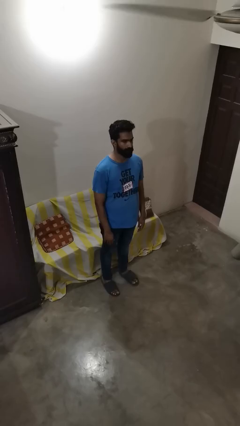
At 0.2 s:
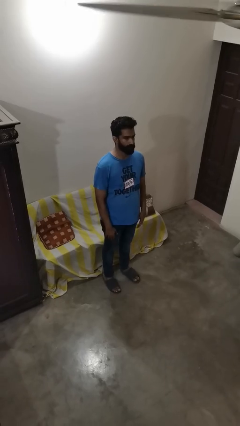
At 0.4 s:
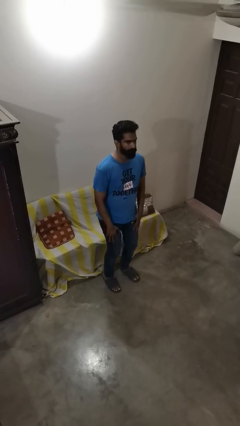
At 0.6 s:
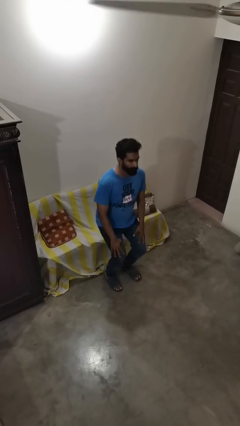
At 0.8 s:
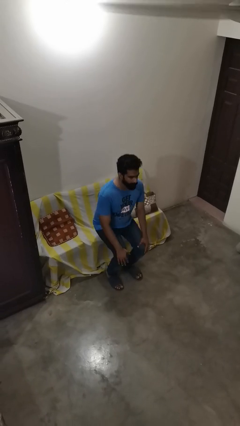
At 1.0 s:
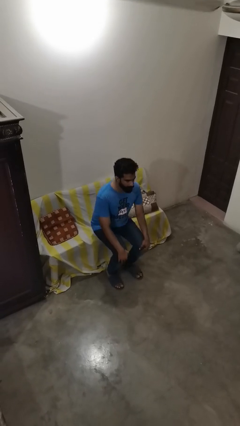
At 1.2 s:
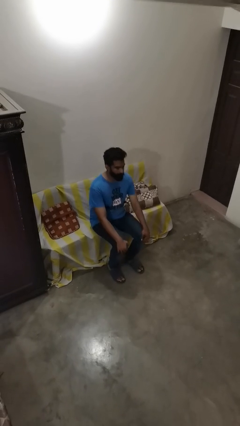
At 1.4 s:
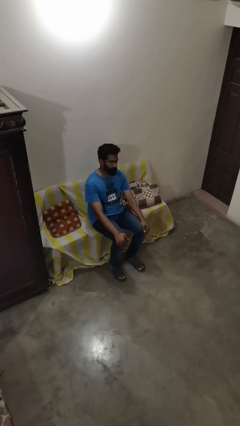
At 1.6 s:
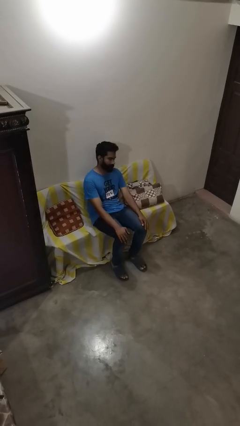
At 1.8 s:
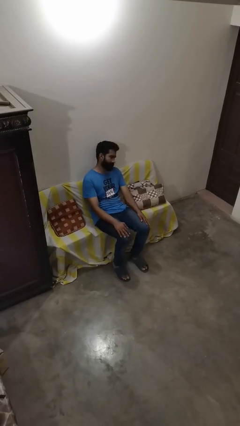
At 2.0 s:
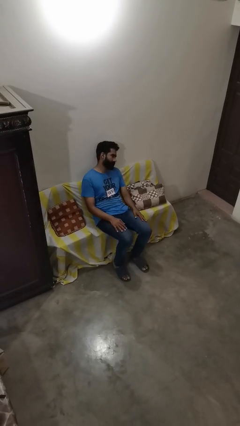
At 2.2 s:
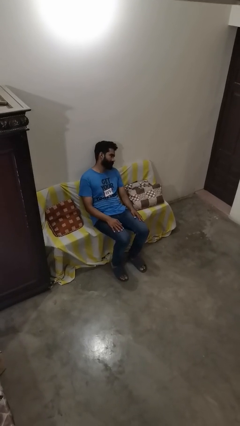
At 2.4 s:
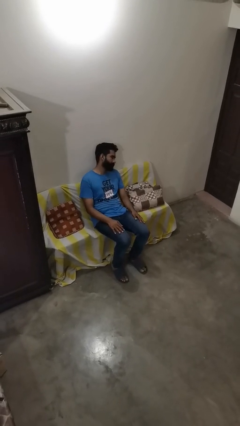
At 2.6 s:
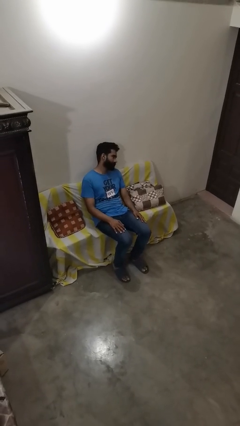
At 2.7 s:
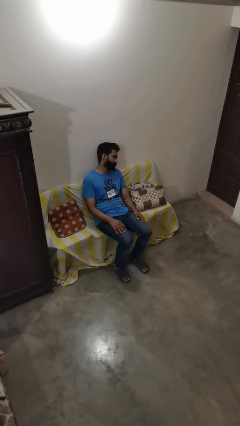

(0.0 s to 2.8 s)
person lies down on couch

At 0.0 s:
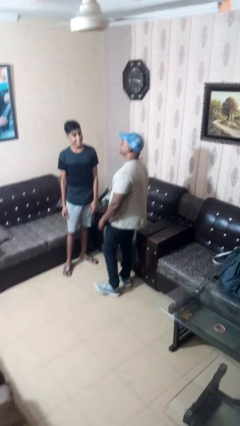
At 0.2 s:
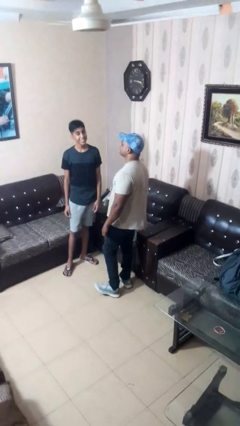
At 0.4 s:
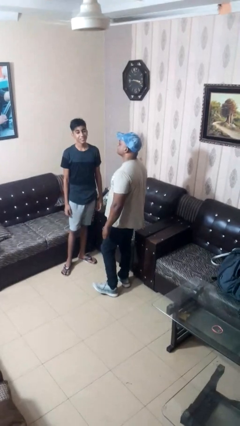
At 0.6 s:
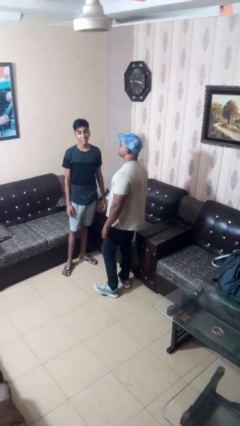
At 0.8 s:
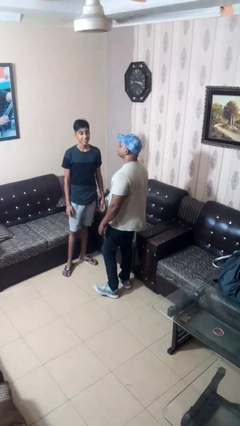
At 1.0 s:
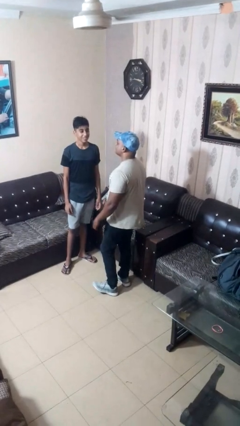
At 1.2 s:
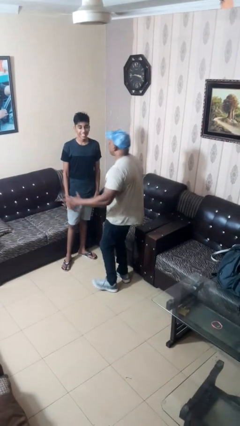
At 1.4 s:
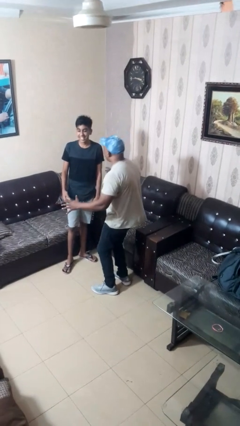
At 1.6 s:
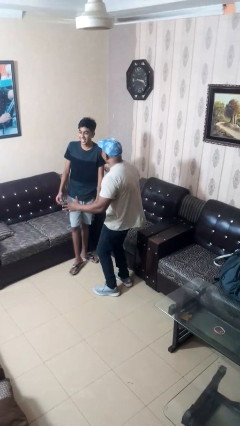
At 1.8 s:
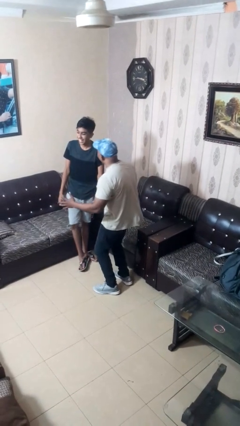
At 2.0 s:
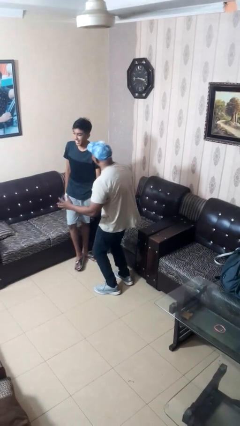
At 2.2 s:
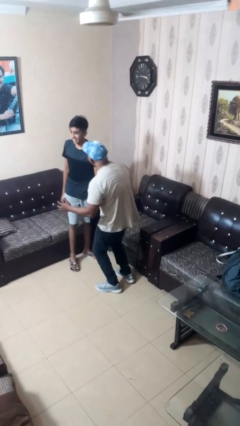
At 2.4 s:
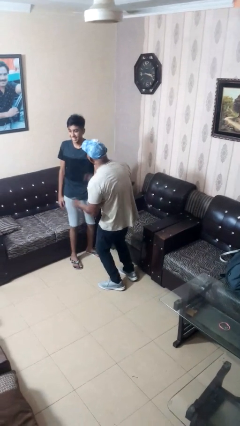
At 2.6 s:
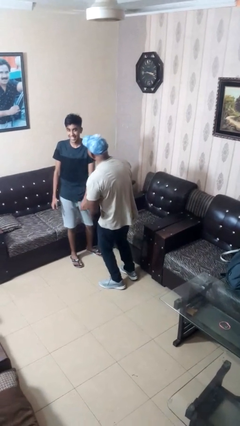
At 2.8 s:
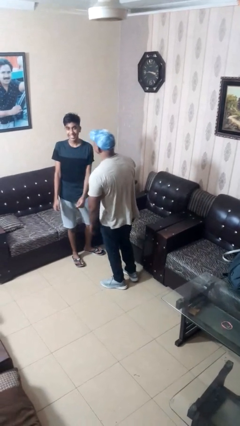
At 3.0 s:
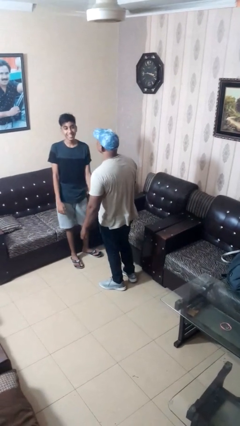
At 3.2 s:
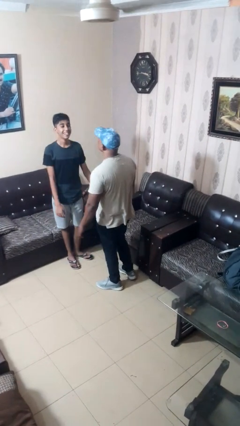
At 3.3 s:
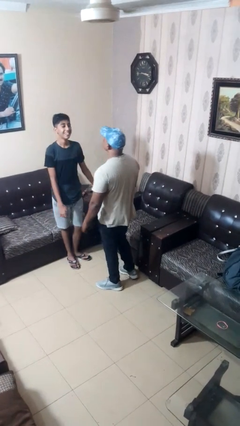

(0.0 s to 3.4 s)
person laughs with person

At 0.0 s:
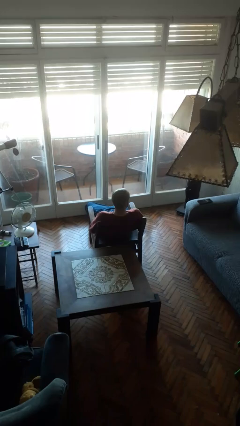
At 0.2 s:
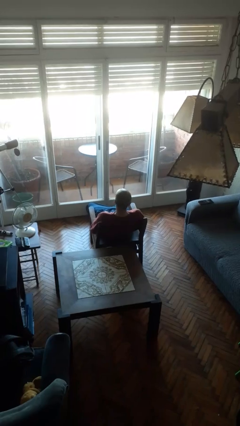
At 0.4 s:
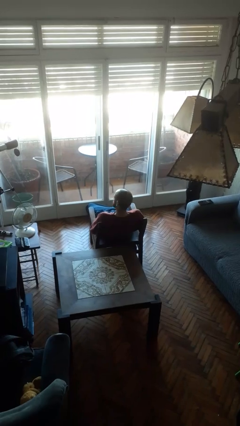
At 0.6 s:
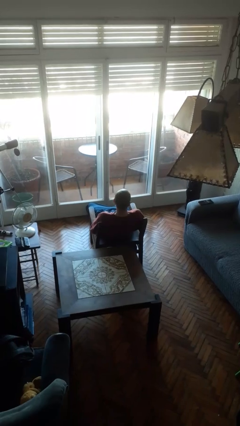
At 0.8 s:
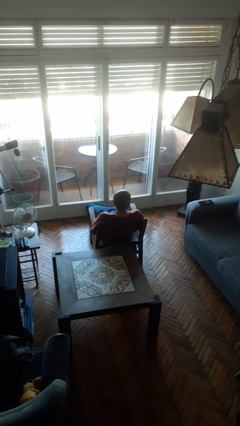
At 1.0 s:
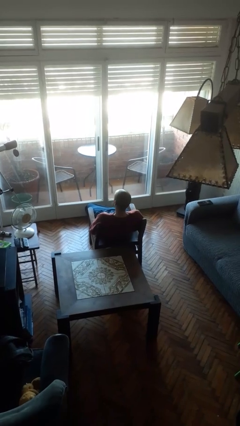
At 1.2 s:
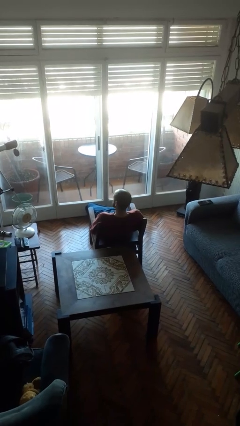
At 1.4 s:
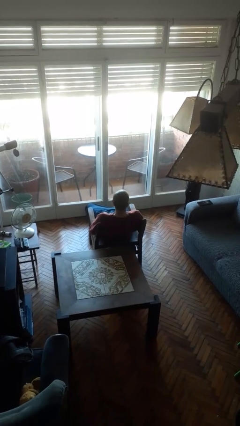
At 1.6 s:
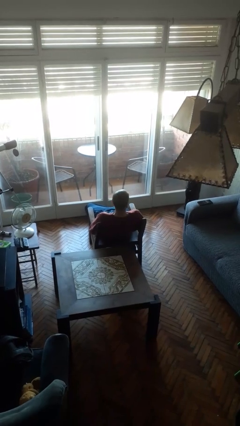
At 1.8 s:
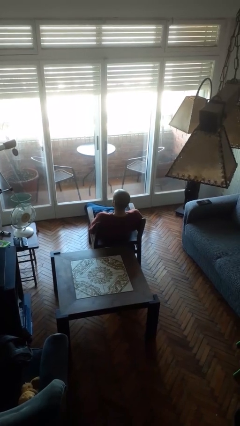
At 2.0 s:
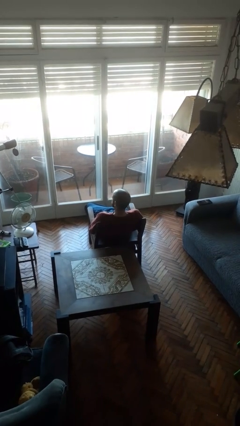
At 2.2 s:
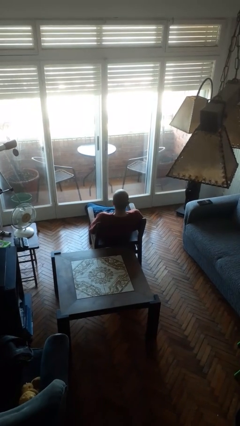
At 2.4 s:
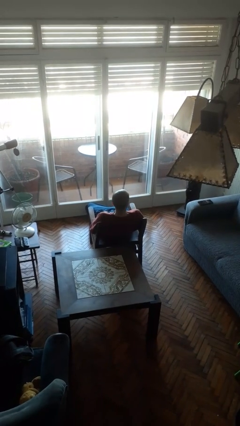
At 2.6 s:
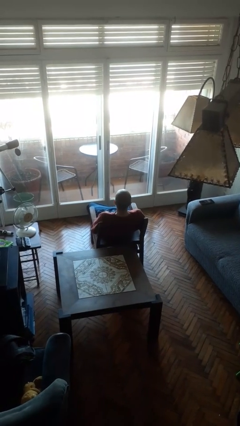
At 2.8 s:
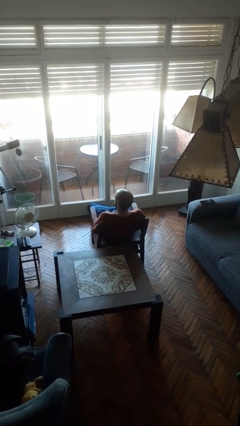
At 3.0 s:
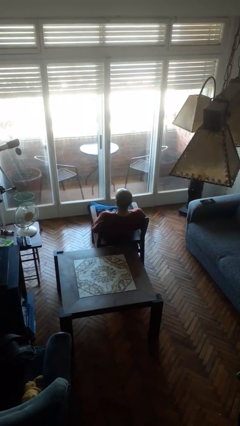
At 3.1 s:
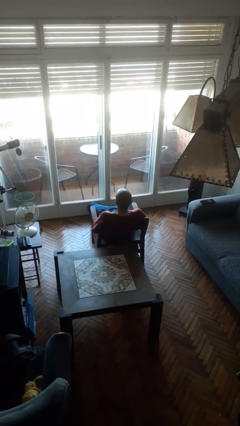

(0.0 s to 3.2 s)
person shakes head

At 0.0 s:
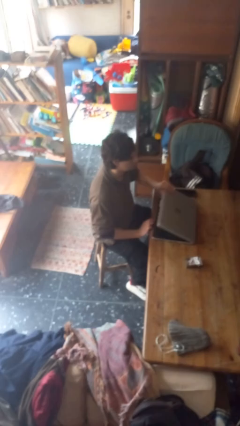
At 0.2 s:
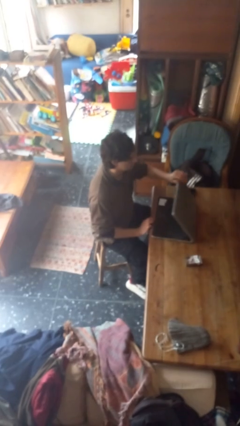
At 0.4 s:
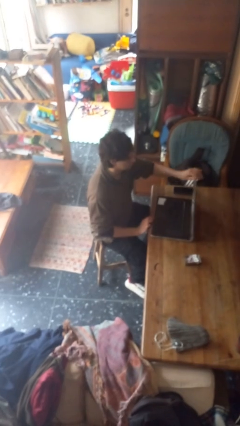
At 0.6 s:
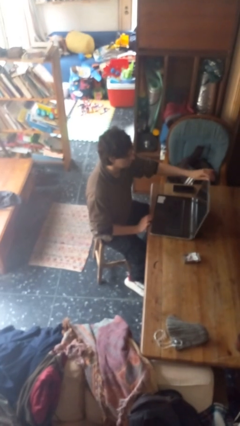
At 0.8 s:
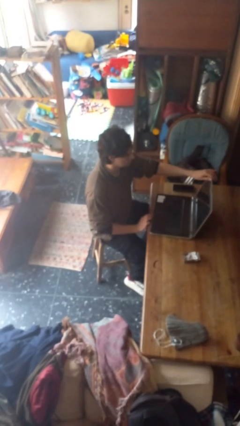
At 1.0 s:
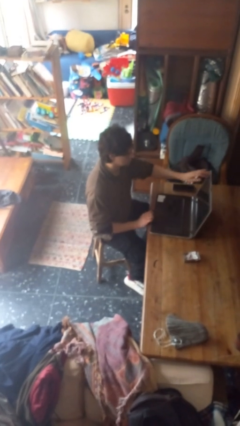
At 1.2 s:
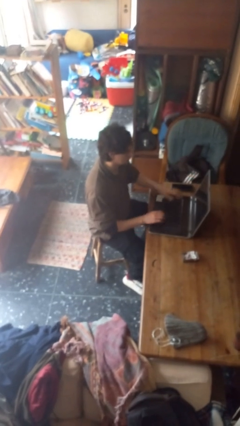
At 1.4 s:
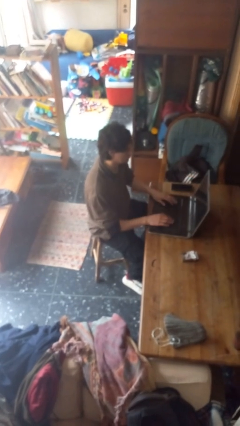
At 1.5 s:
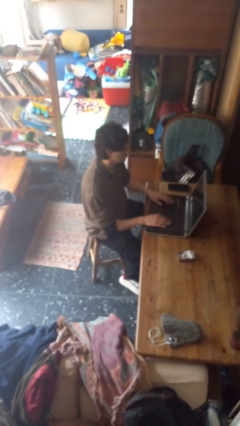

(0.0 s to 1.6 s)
person opens laptop

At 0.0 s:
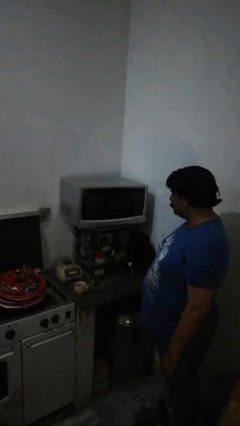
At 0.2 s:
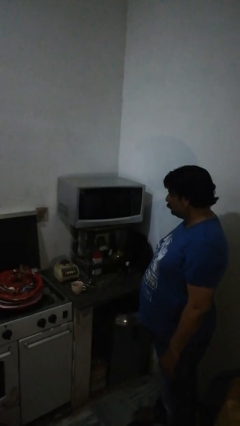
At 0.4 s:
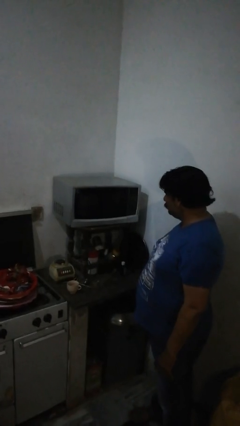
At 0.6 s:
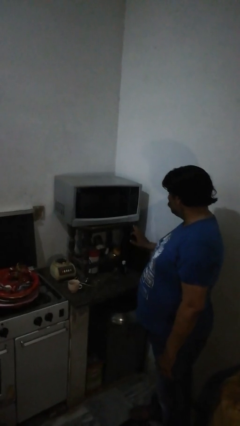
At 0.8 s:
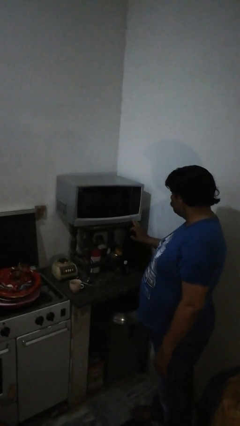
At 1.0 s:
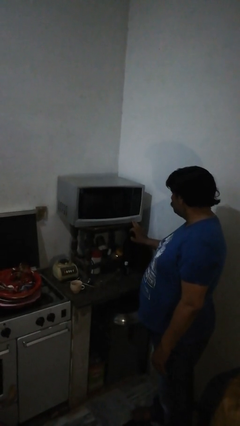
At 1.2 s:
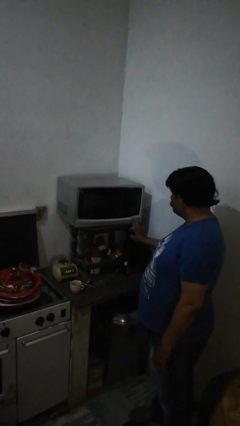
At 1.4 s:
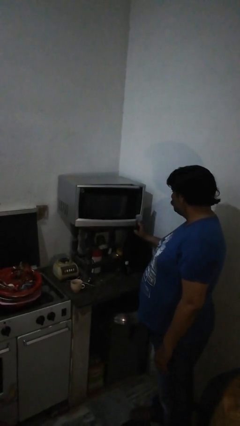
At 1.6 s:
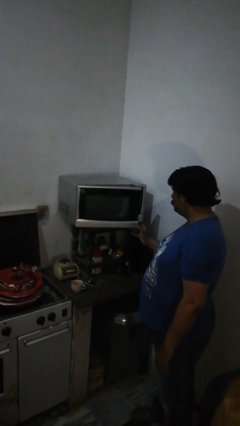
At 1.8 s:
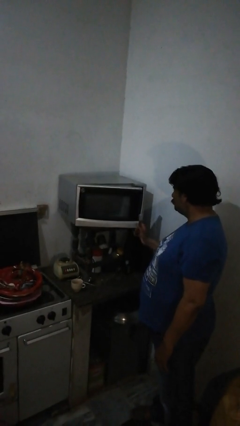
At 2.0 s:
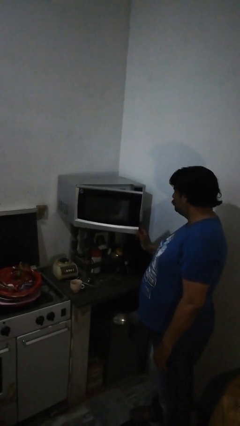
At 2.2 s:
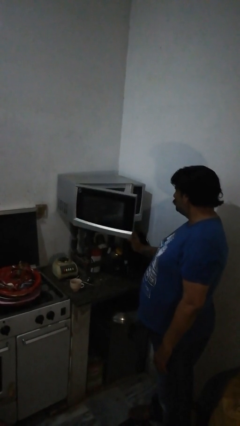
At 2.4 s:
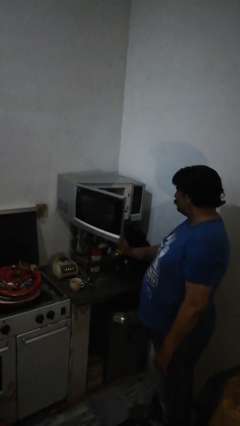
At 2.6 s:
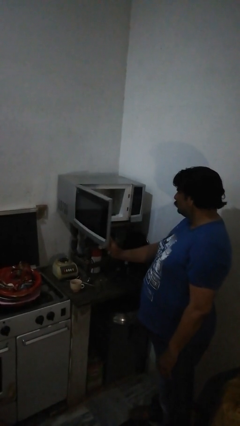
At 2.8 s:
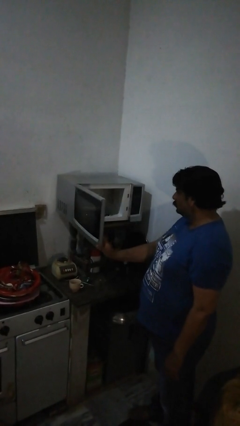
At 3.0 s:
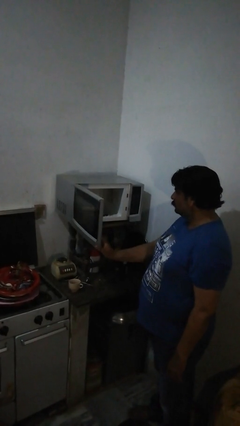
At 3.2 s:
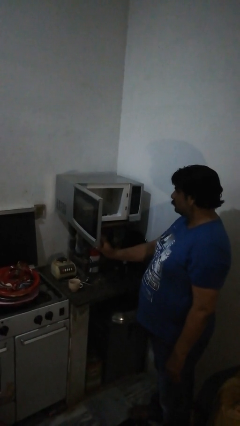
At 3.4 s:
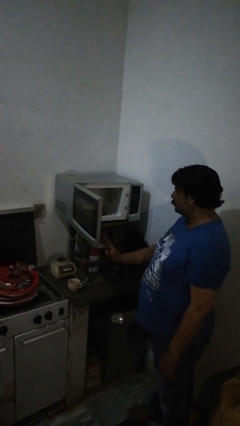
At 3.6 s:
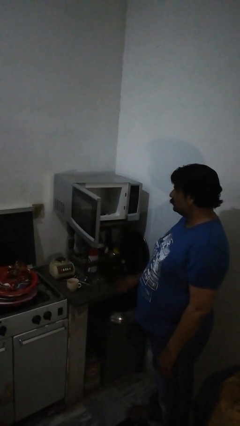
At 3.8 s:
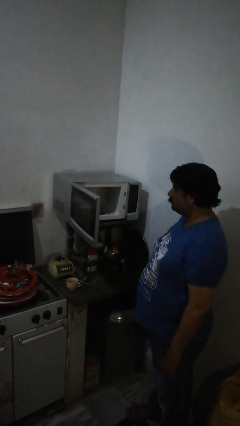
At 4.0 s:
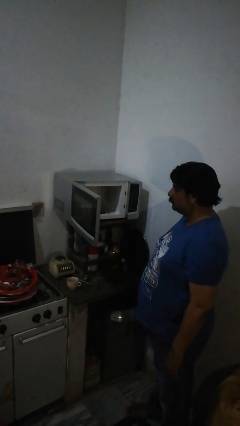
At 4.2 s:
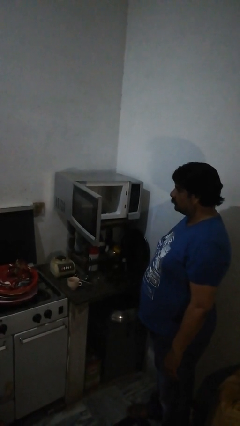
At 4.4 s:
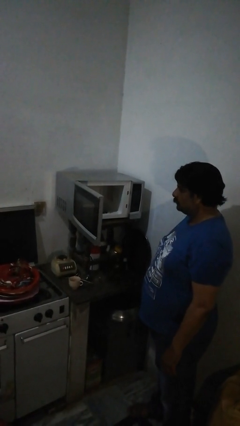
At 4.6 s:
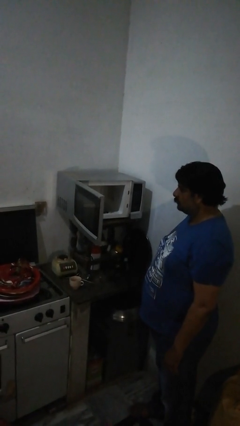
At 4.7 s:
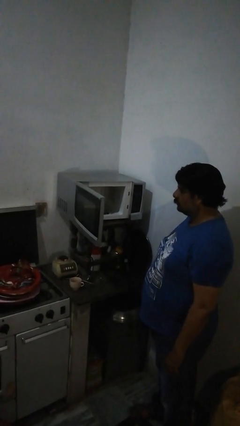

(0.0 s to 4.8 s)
person opens oven door

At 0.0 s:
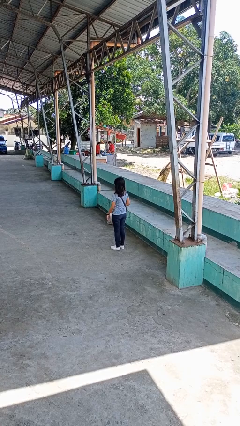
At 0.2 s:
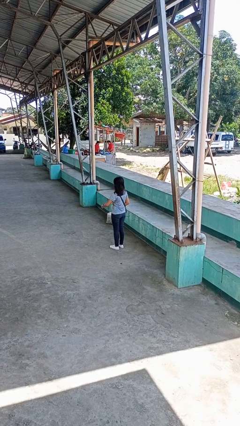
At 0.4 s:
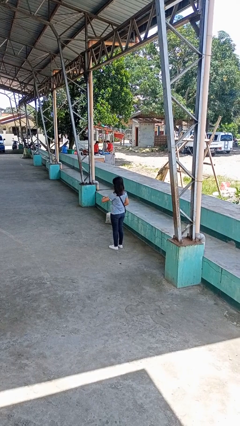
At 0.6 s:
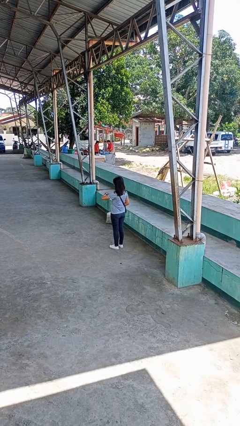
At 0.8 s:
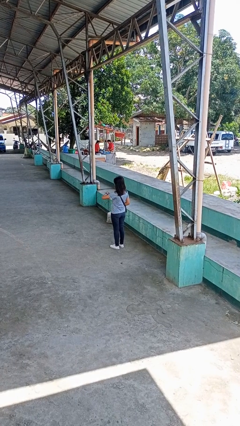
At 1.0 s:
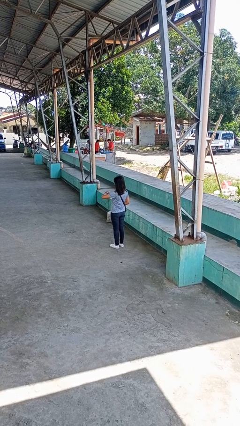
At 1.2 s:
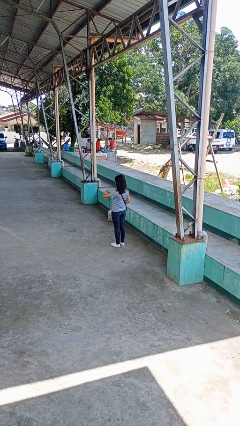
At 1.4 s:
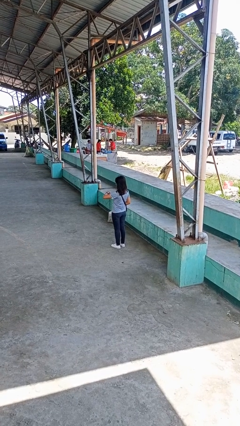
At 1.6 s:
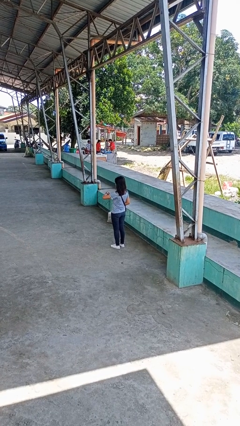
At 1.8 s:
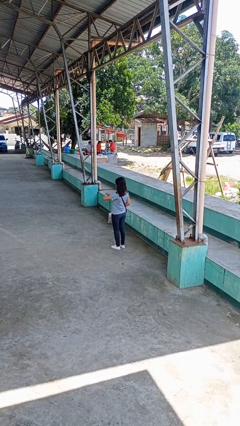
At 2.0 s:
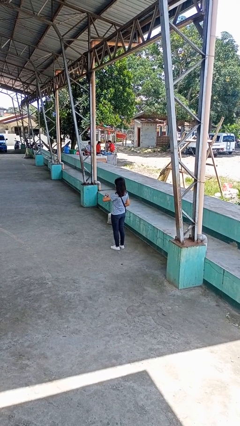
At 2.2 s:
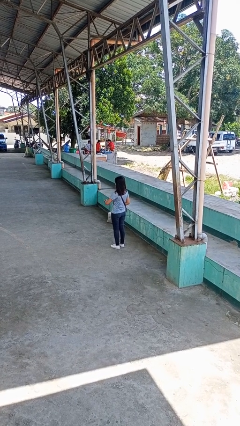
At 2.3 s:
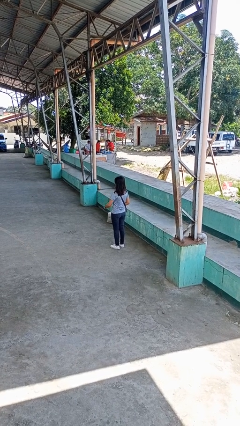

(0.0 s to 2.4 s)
person looks at wristwatch
